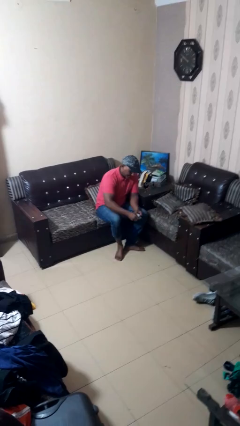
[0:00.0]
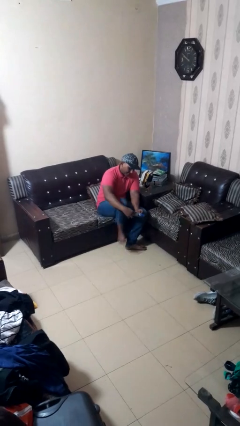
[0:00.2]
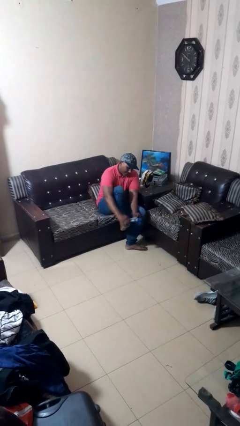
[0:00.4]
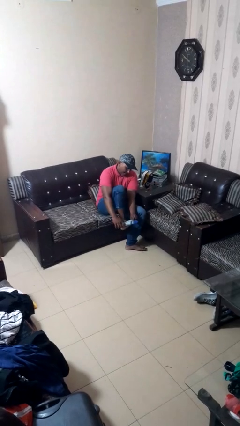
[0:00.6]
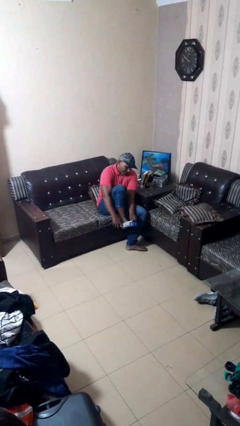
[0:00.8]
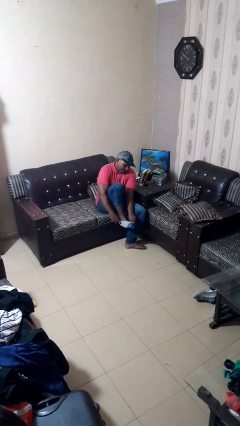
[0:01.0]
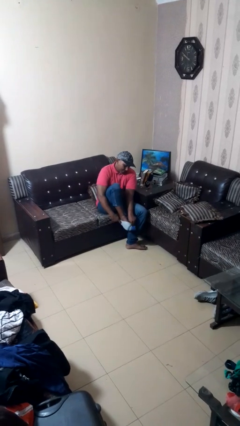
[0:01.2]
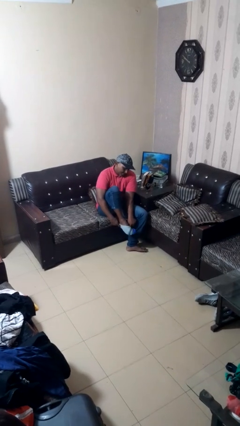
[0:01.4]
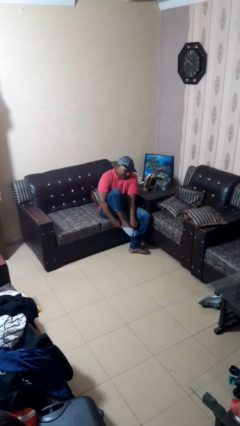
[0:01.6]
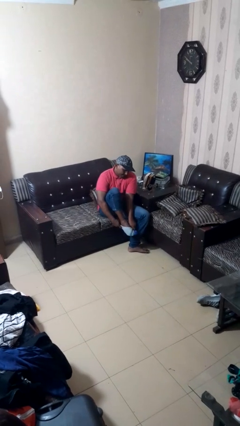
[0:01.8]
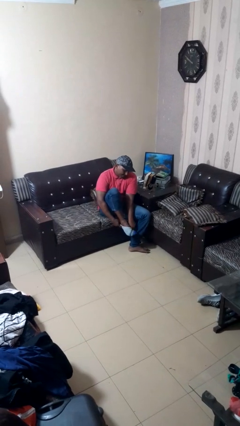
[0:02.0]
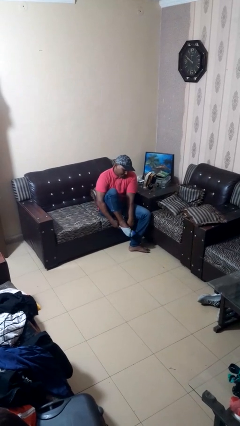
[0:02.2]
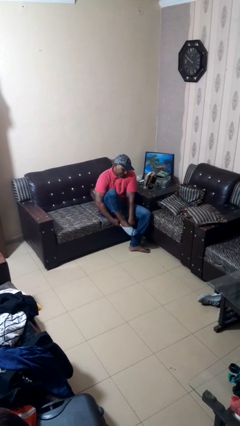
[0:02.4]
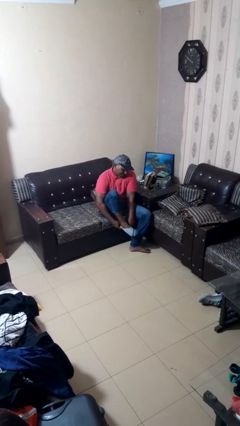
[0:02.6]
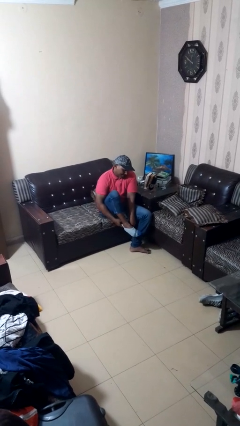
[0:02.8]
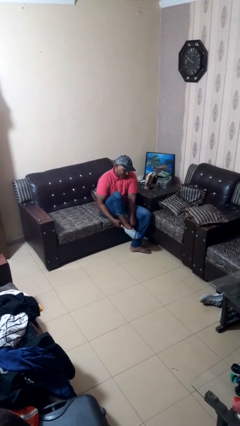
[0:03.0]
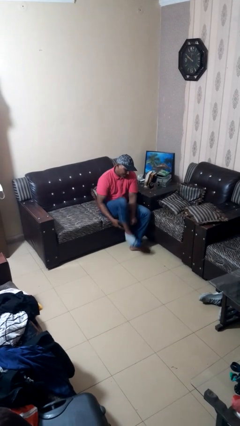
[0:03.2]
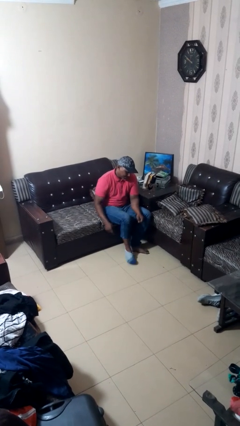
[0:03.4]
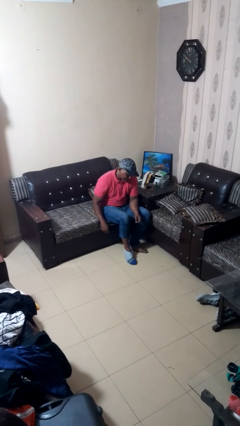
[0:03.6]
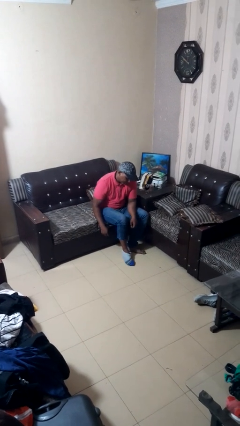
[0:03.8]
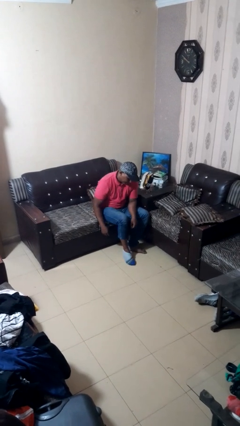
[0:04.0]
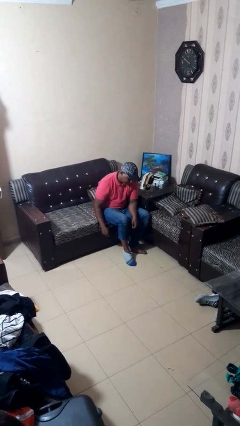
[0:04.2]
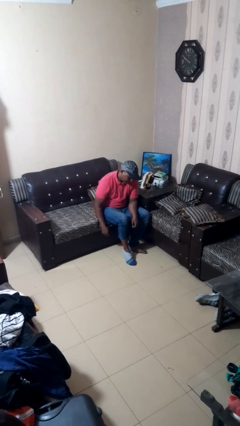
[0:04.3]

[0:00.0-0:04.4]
person puts on socks

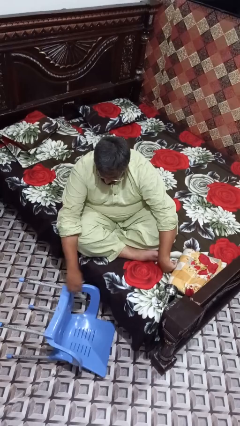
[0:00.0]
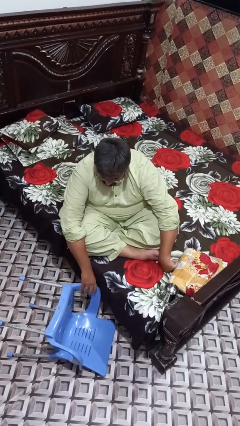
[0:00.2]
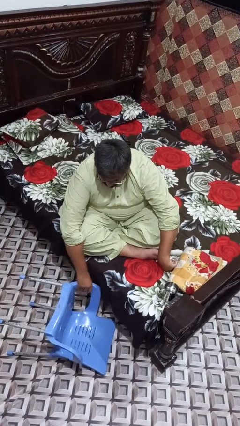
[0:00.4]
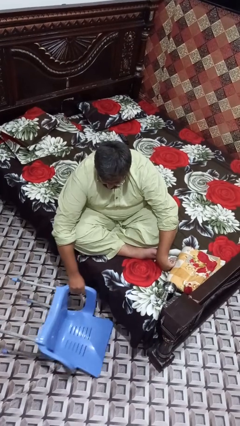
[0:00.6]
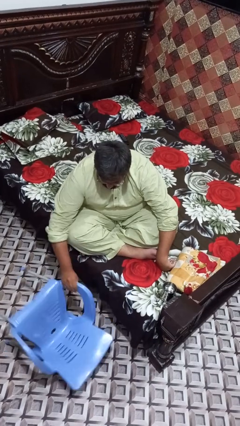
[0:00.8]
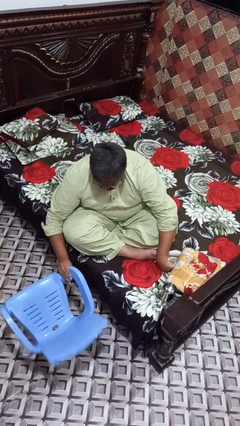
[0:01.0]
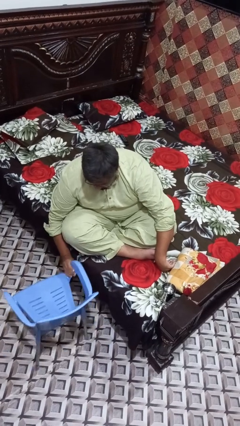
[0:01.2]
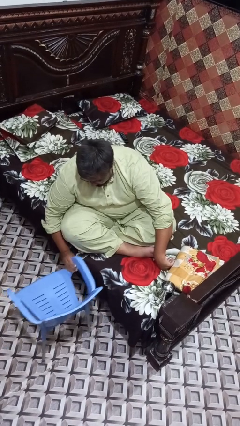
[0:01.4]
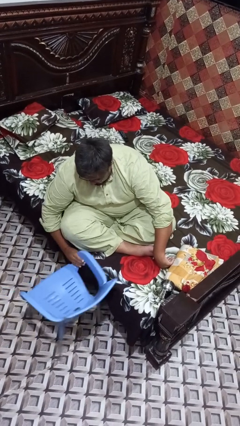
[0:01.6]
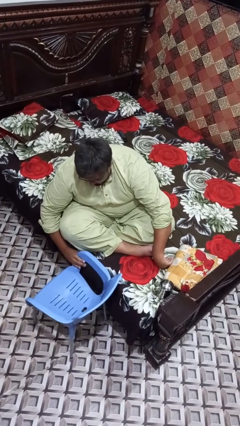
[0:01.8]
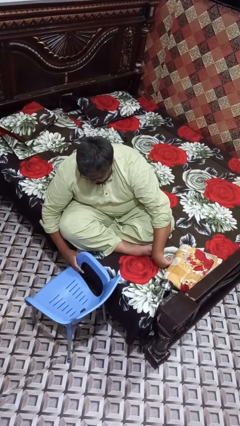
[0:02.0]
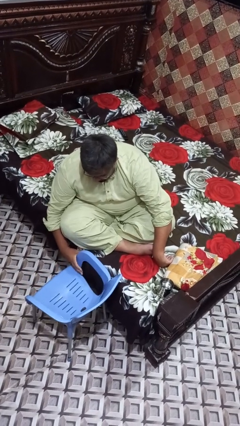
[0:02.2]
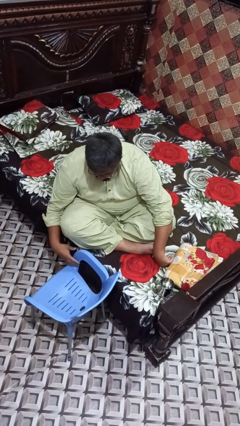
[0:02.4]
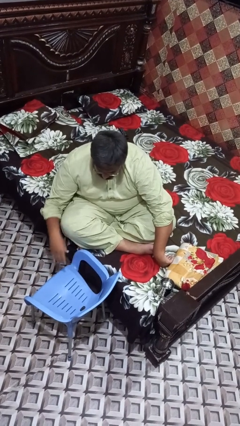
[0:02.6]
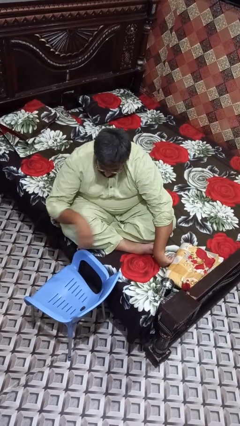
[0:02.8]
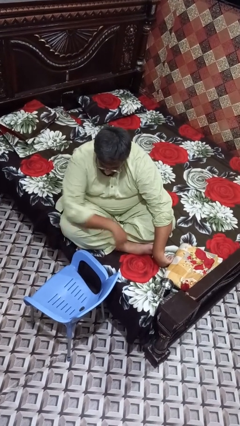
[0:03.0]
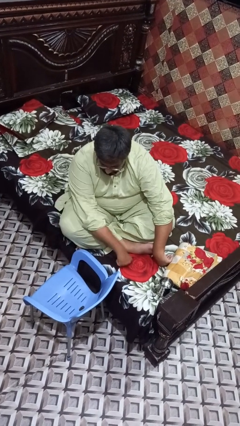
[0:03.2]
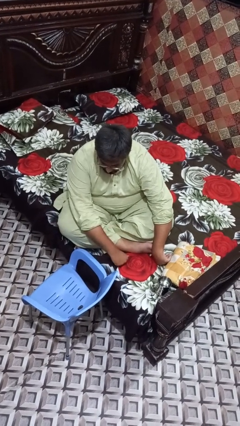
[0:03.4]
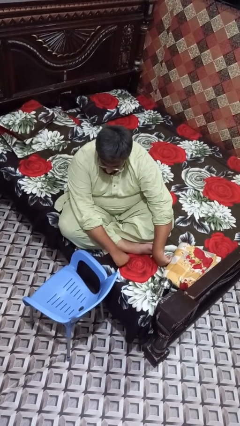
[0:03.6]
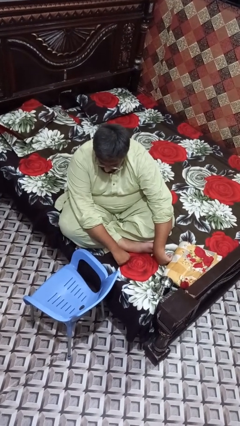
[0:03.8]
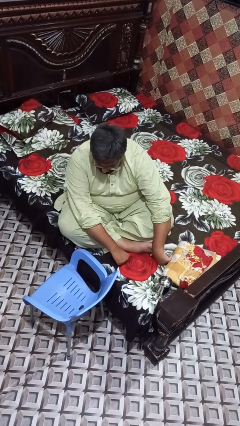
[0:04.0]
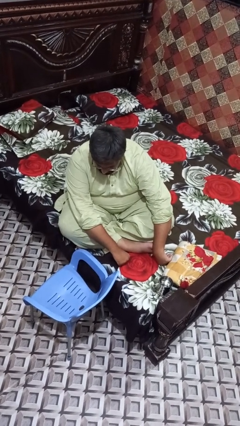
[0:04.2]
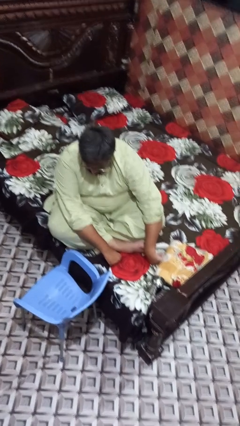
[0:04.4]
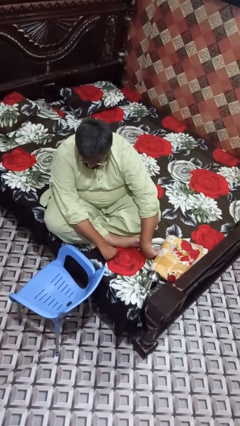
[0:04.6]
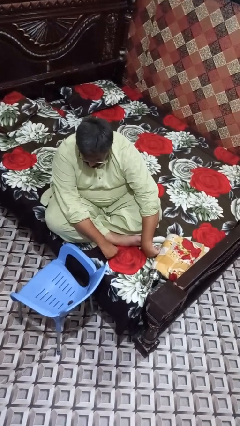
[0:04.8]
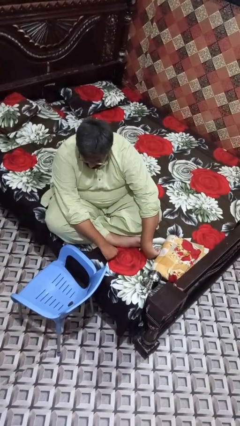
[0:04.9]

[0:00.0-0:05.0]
person sets upright furniture

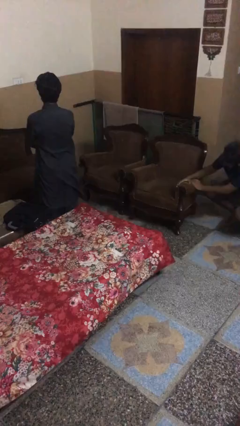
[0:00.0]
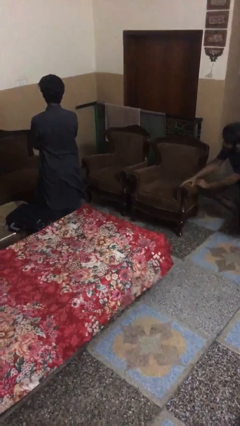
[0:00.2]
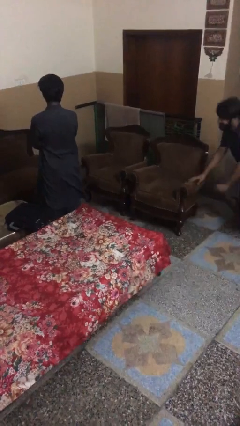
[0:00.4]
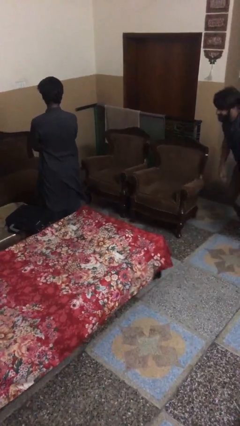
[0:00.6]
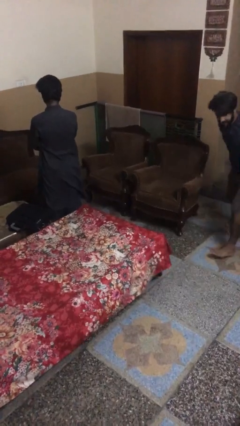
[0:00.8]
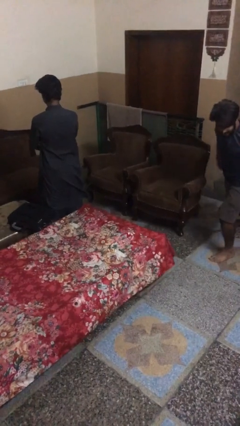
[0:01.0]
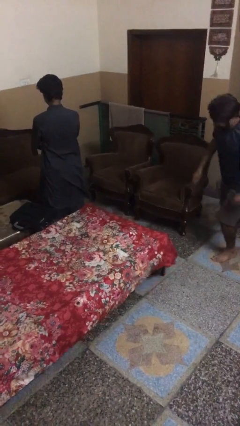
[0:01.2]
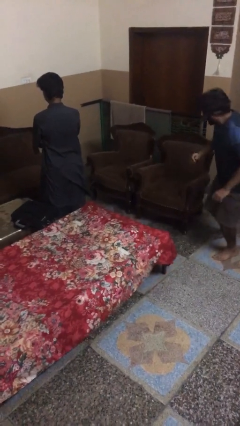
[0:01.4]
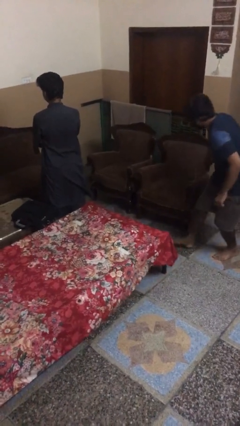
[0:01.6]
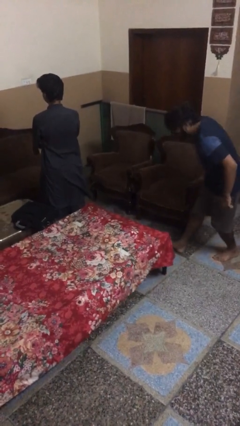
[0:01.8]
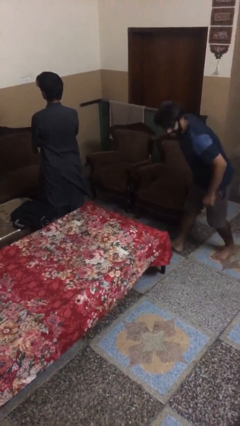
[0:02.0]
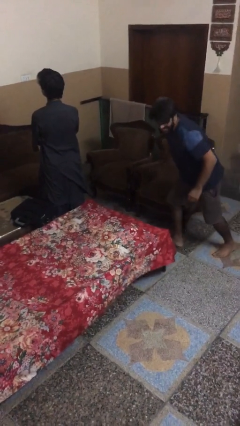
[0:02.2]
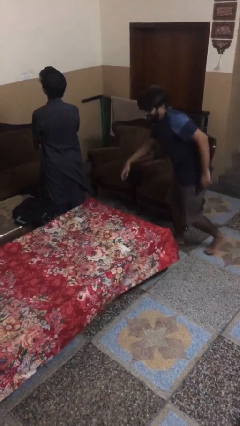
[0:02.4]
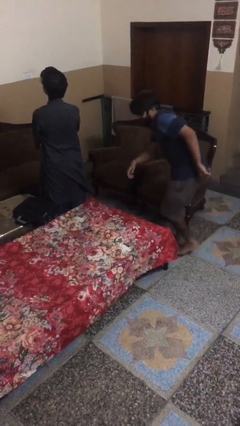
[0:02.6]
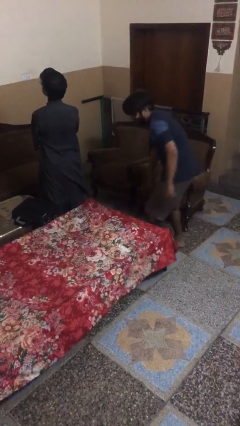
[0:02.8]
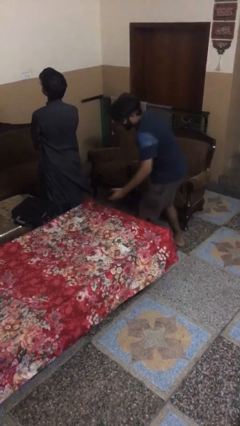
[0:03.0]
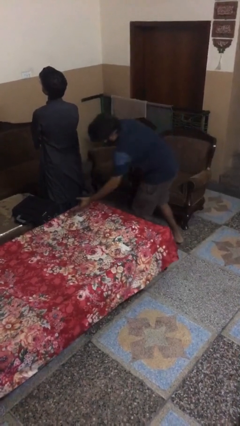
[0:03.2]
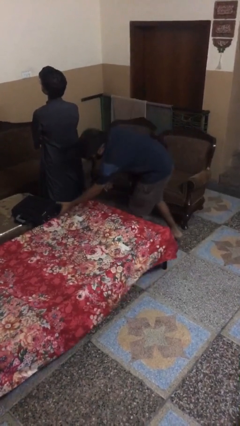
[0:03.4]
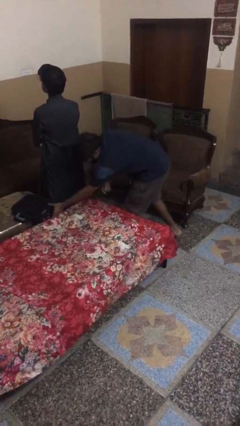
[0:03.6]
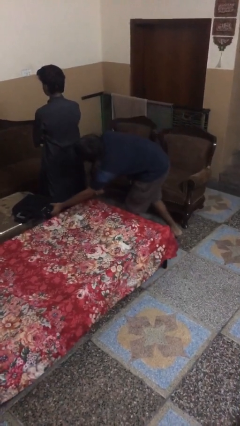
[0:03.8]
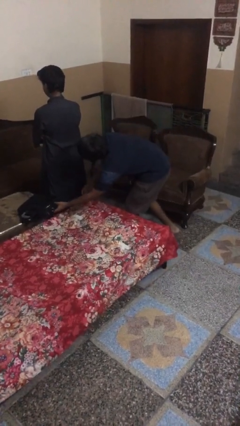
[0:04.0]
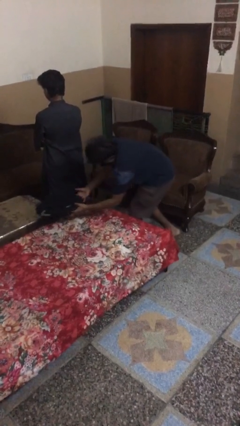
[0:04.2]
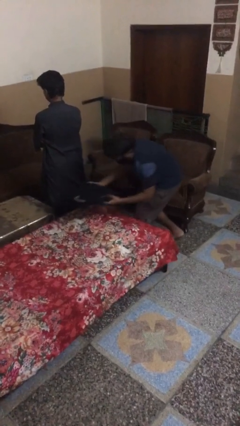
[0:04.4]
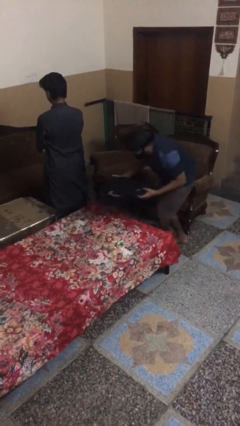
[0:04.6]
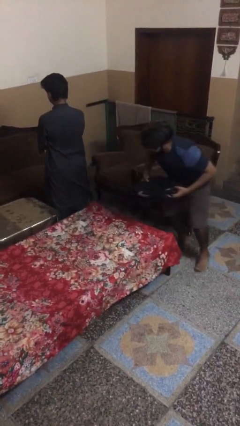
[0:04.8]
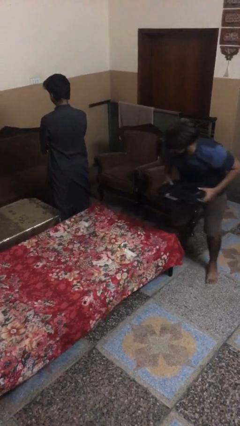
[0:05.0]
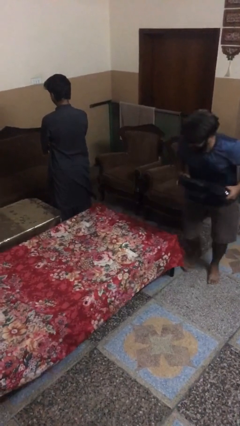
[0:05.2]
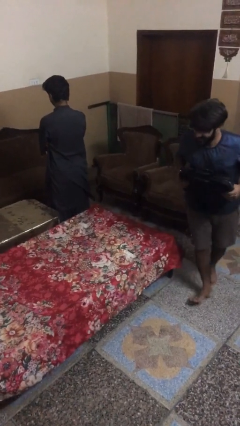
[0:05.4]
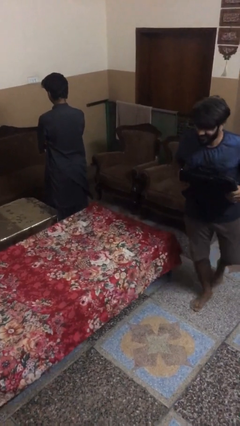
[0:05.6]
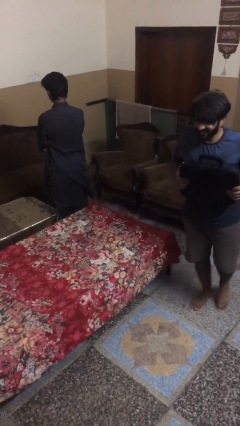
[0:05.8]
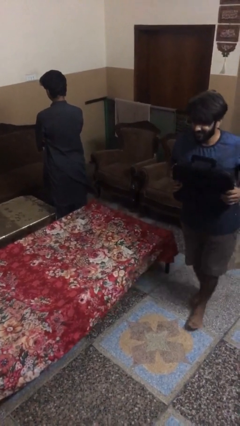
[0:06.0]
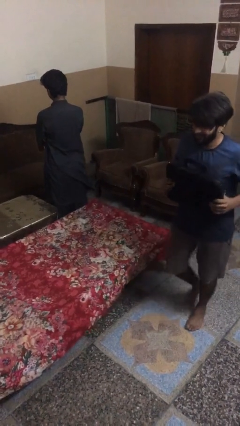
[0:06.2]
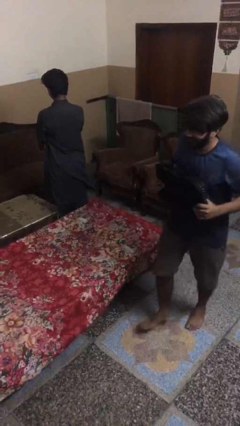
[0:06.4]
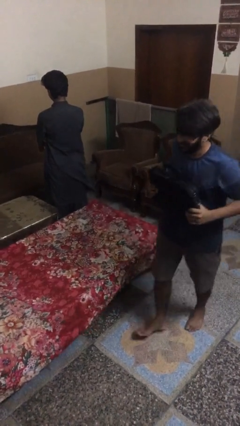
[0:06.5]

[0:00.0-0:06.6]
person steals object from person

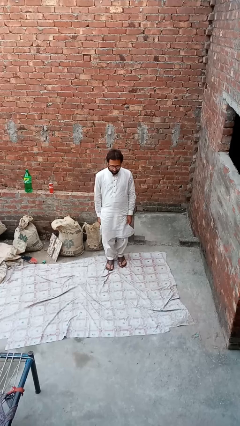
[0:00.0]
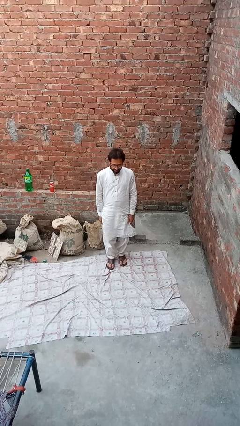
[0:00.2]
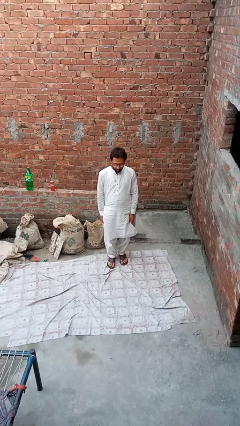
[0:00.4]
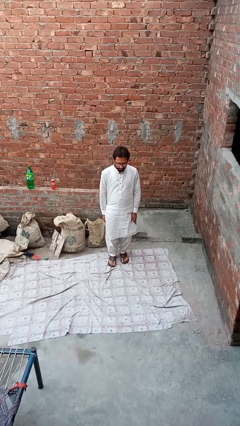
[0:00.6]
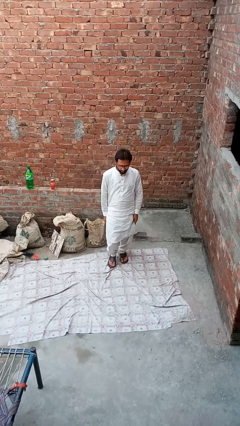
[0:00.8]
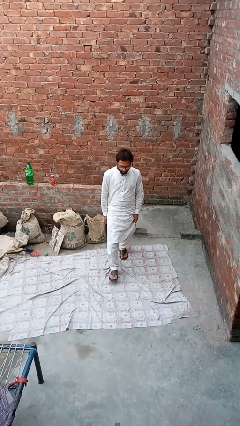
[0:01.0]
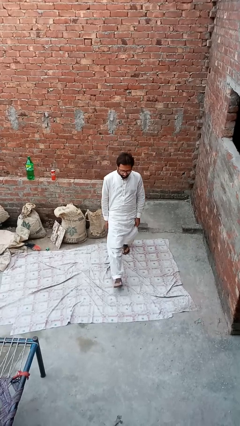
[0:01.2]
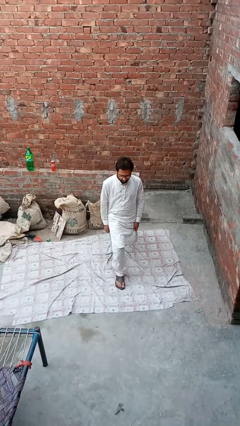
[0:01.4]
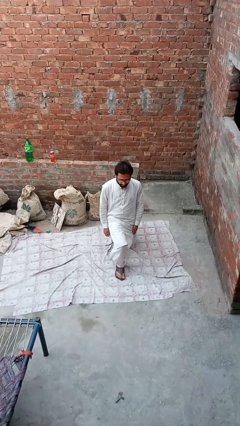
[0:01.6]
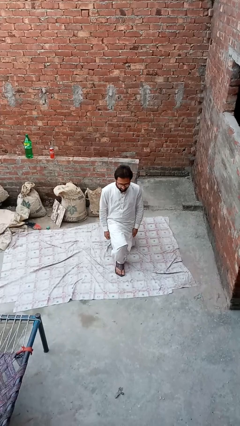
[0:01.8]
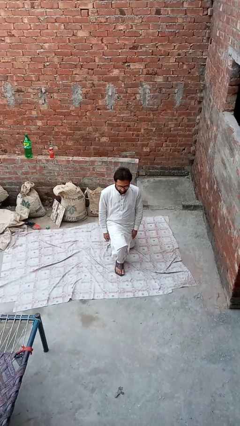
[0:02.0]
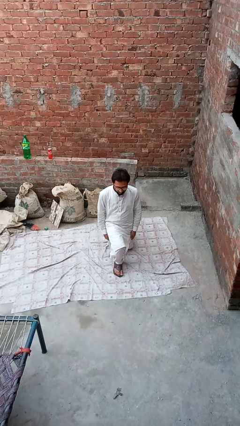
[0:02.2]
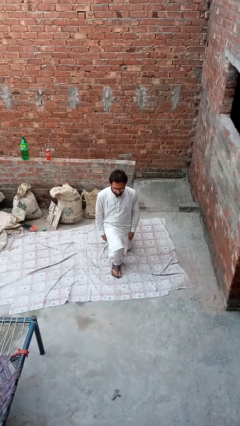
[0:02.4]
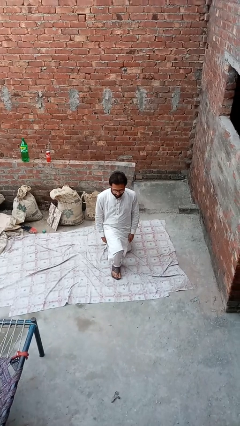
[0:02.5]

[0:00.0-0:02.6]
person exercises with lunges
